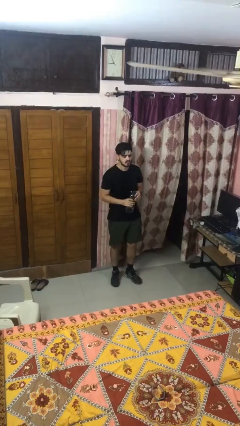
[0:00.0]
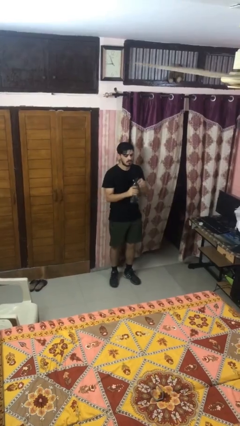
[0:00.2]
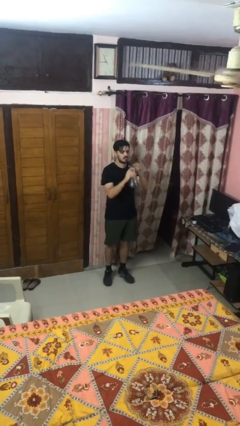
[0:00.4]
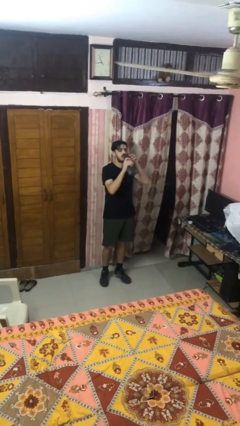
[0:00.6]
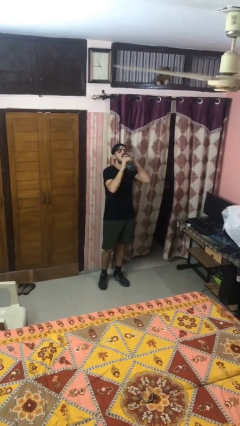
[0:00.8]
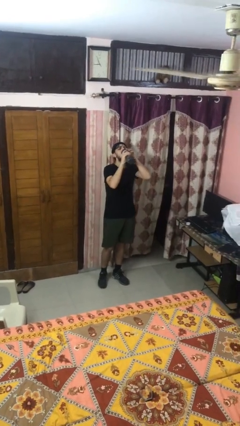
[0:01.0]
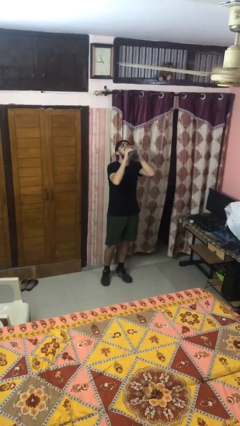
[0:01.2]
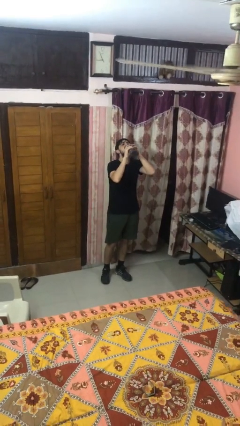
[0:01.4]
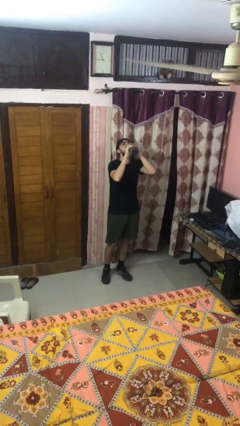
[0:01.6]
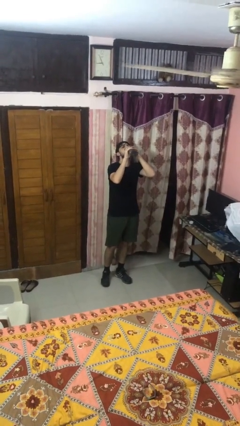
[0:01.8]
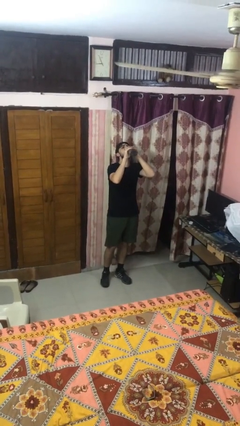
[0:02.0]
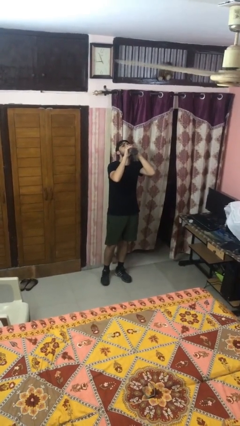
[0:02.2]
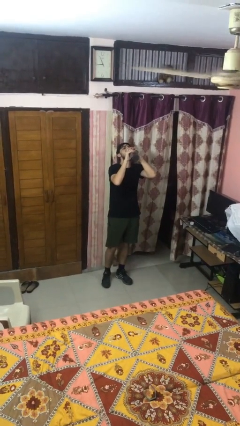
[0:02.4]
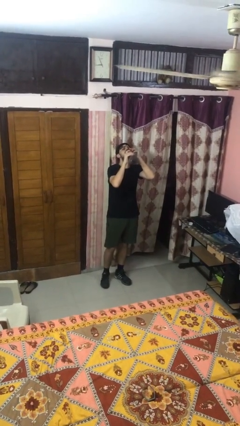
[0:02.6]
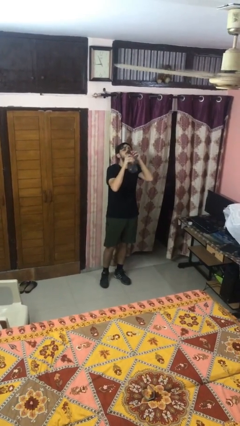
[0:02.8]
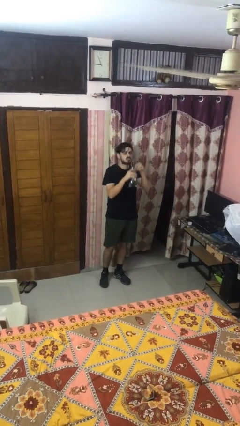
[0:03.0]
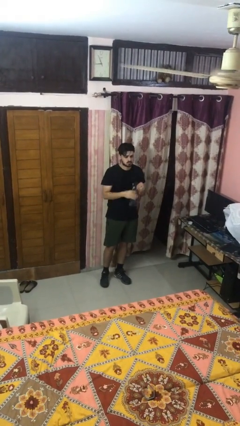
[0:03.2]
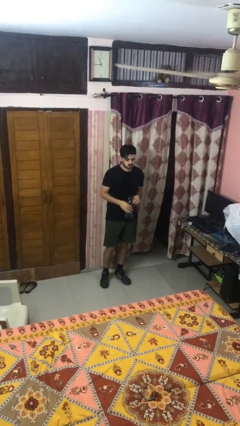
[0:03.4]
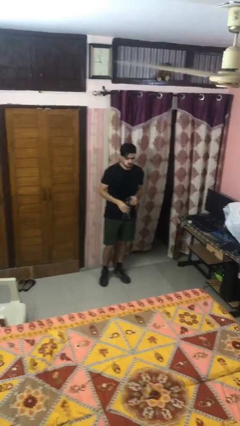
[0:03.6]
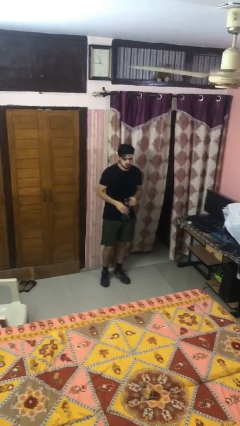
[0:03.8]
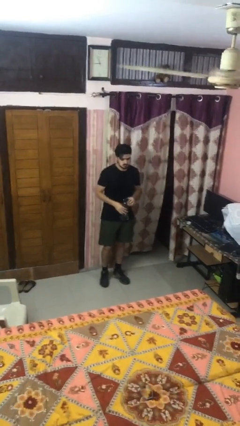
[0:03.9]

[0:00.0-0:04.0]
person drinks from bottle

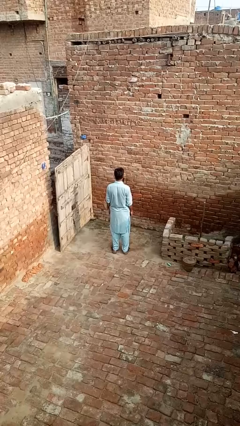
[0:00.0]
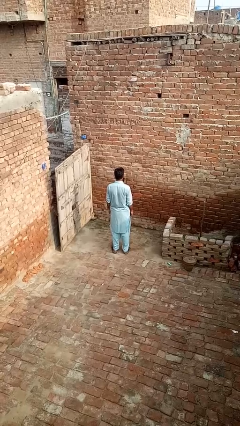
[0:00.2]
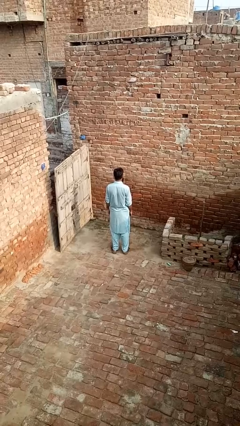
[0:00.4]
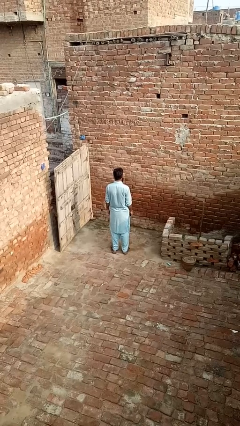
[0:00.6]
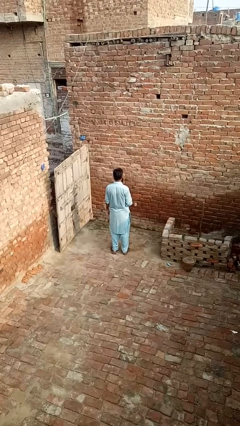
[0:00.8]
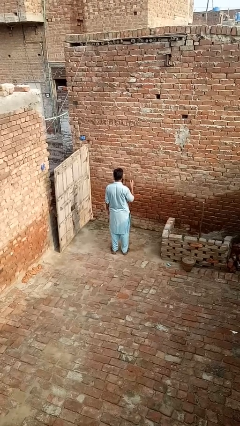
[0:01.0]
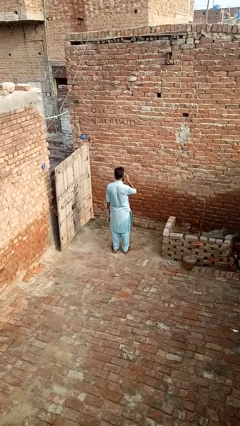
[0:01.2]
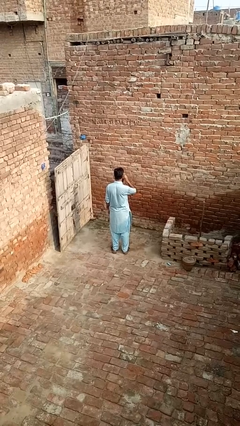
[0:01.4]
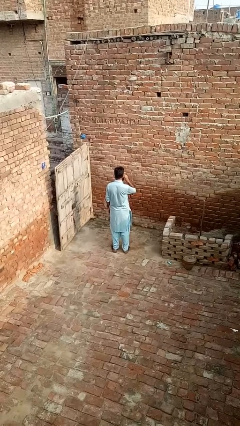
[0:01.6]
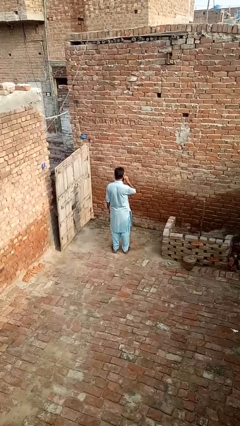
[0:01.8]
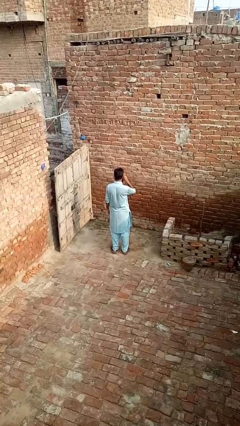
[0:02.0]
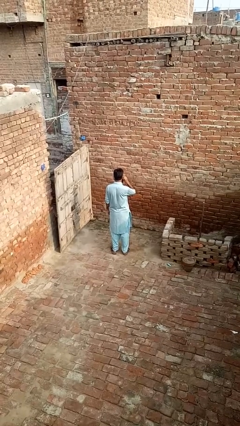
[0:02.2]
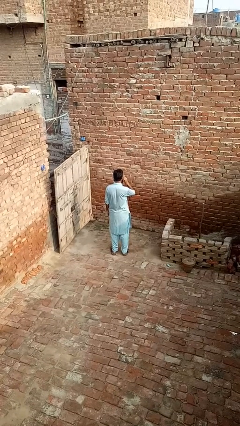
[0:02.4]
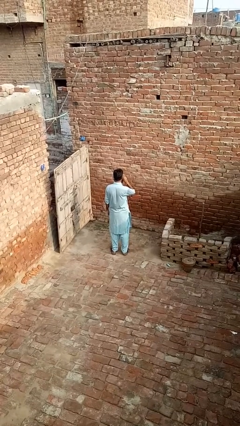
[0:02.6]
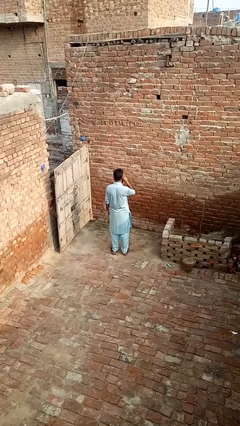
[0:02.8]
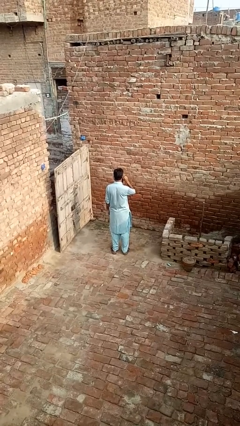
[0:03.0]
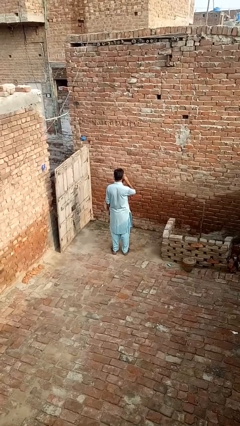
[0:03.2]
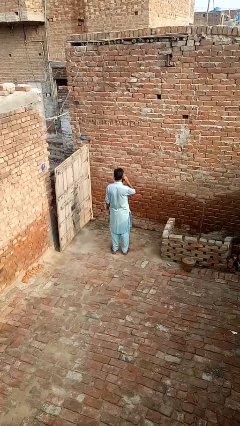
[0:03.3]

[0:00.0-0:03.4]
person touches earlobe

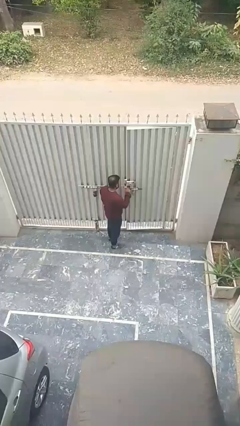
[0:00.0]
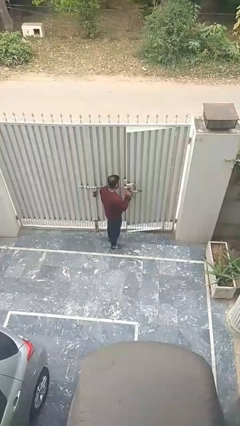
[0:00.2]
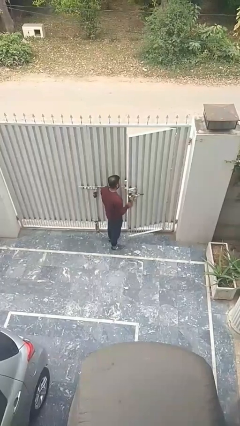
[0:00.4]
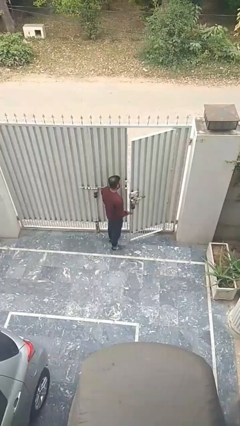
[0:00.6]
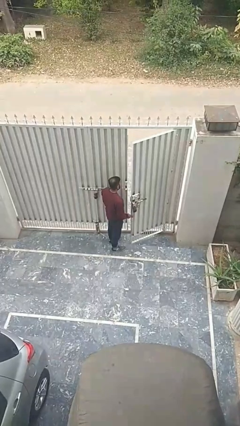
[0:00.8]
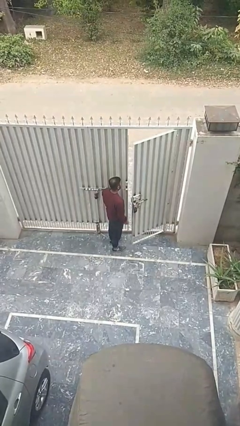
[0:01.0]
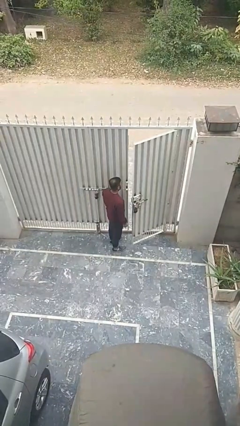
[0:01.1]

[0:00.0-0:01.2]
person opens facility door

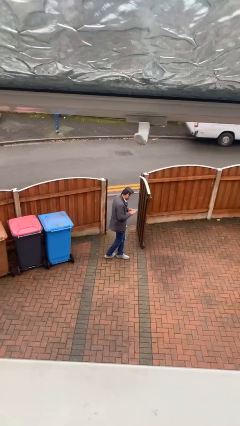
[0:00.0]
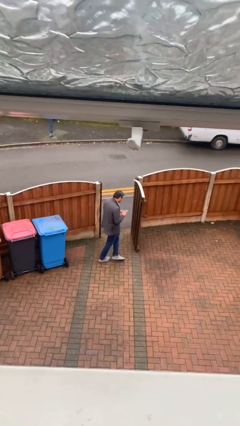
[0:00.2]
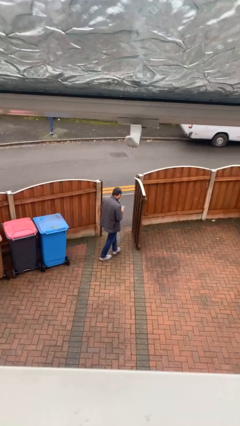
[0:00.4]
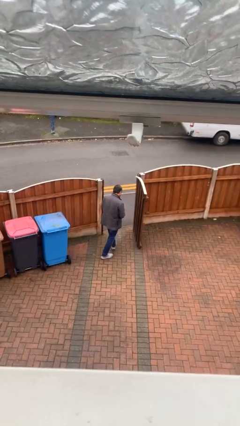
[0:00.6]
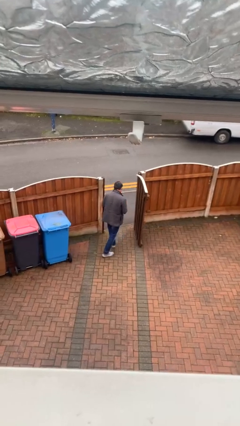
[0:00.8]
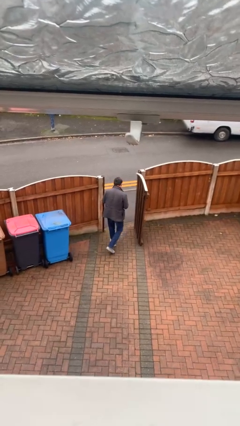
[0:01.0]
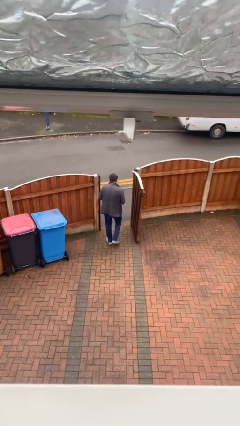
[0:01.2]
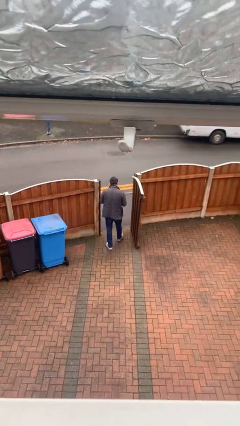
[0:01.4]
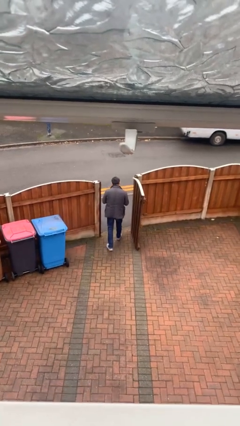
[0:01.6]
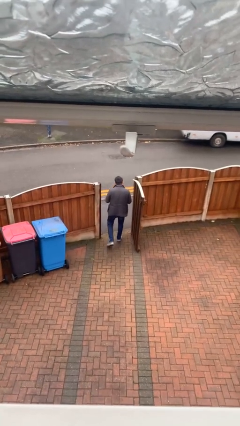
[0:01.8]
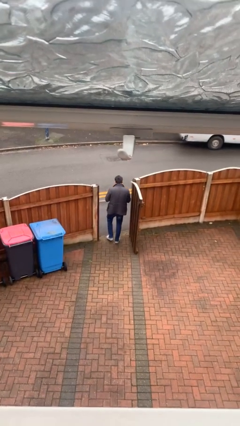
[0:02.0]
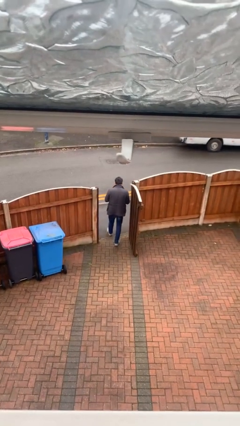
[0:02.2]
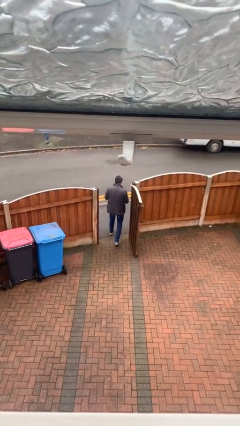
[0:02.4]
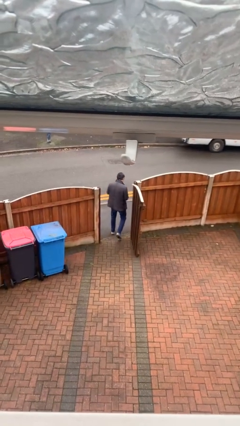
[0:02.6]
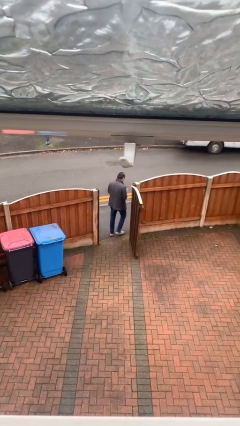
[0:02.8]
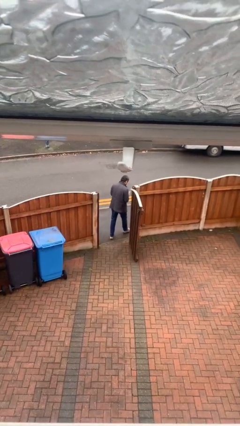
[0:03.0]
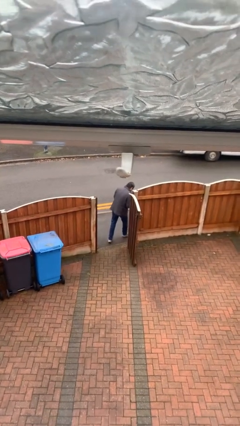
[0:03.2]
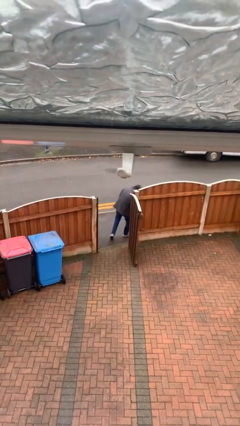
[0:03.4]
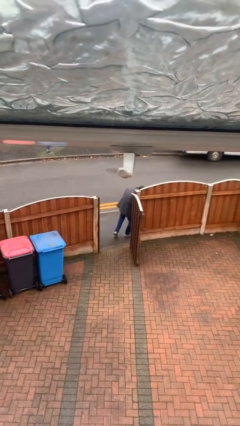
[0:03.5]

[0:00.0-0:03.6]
person exits scene through structure

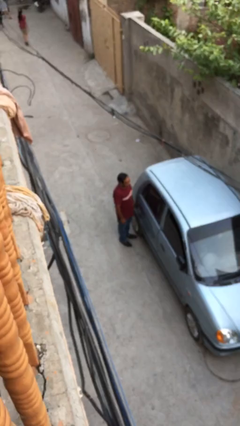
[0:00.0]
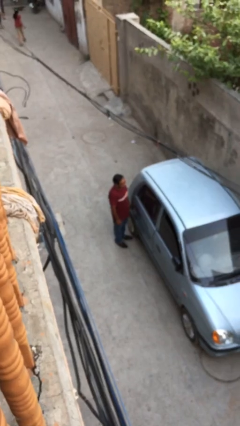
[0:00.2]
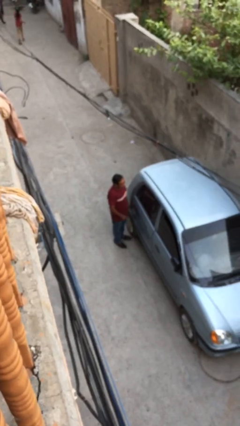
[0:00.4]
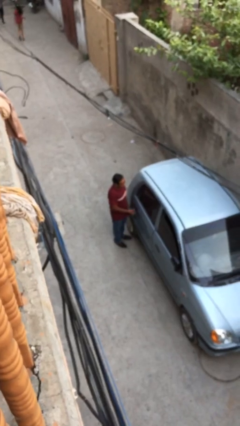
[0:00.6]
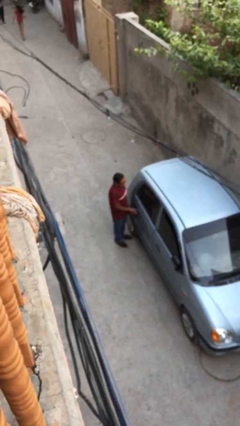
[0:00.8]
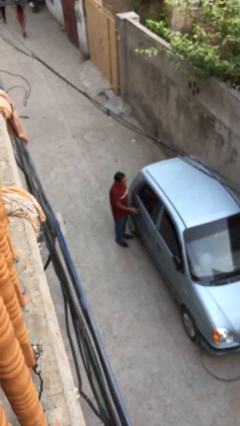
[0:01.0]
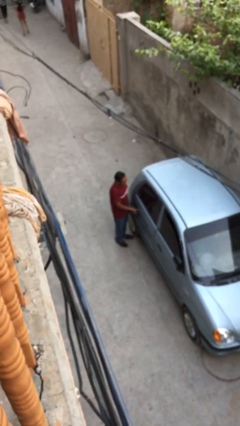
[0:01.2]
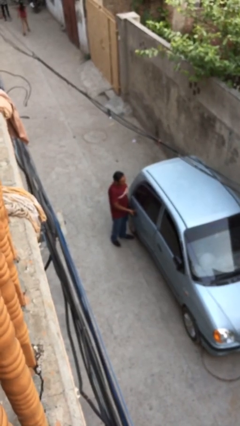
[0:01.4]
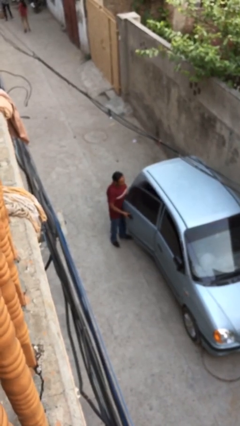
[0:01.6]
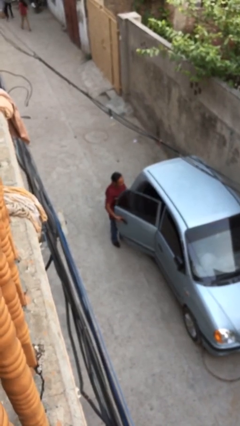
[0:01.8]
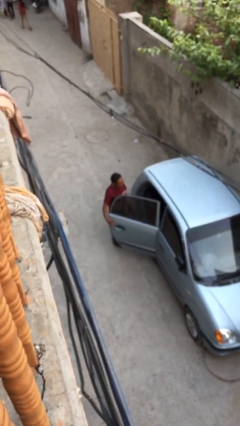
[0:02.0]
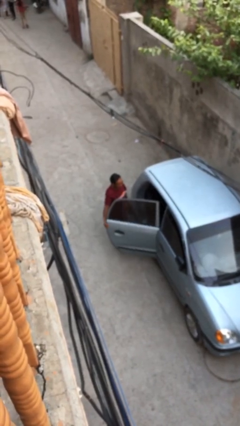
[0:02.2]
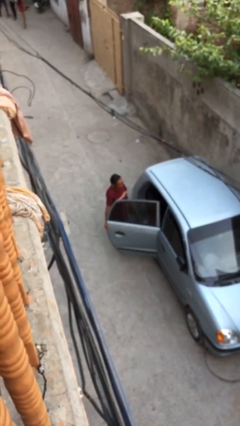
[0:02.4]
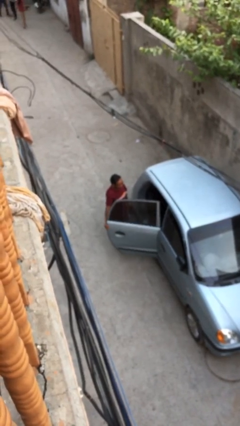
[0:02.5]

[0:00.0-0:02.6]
person opens car door

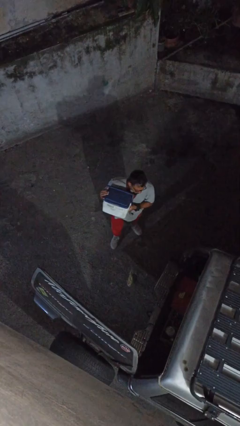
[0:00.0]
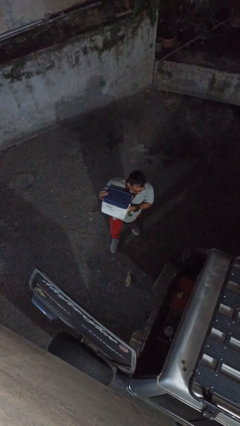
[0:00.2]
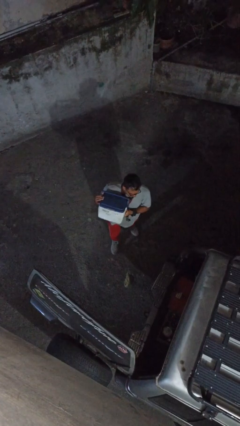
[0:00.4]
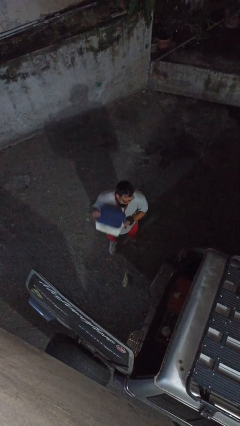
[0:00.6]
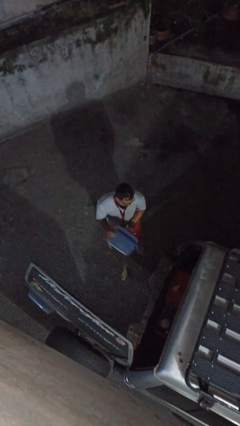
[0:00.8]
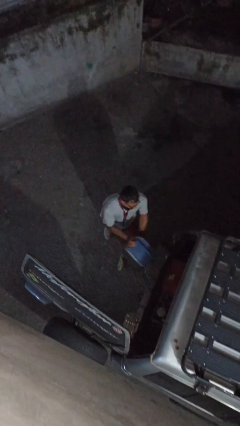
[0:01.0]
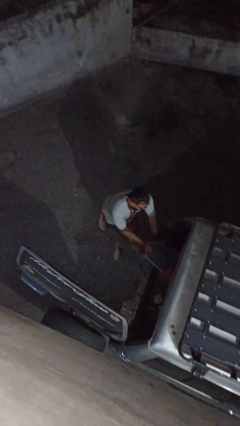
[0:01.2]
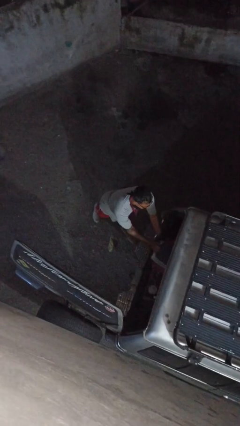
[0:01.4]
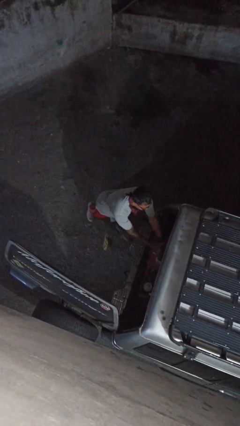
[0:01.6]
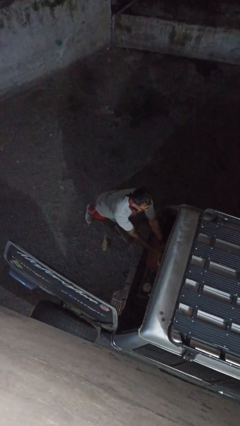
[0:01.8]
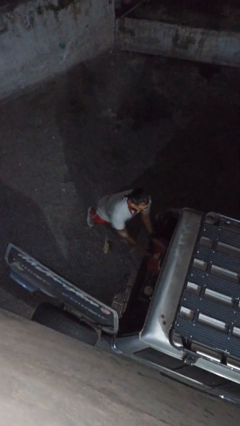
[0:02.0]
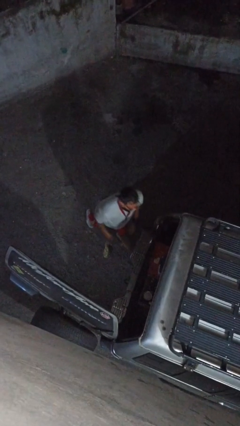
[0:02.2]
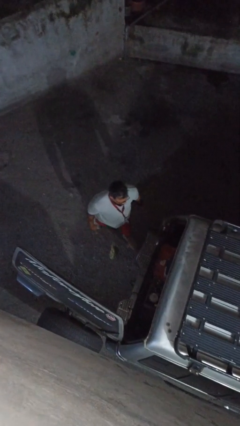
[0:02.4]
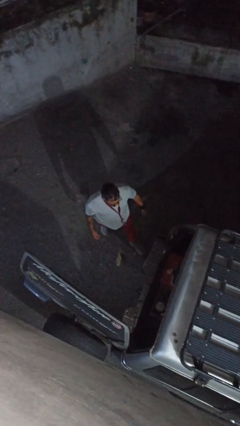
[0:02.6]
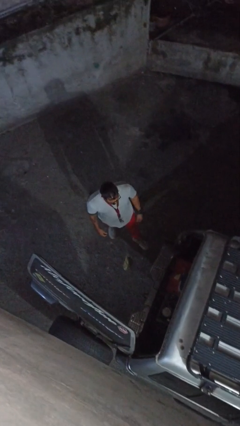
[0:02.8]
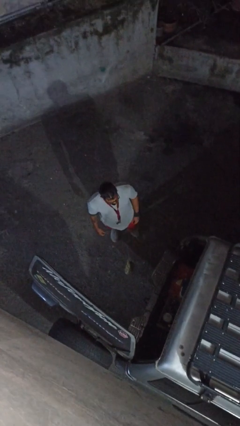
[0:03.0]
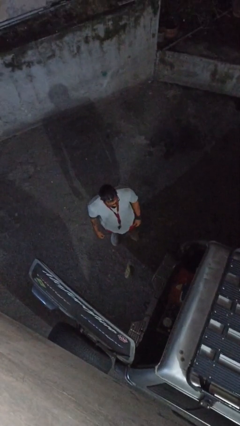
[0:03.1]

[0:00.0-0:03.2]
person loads car
